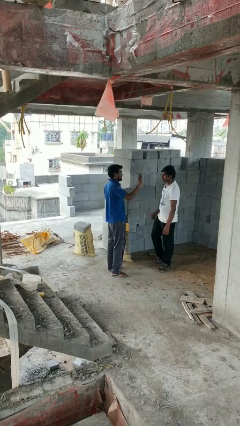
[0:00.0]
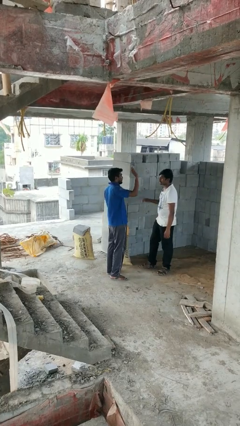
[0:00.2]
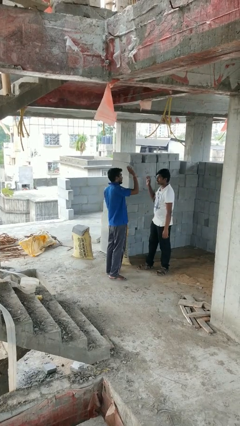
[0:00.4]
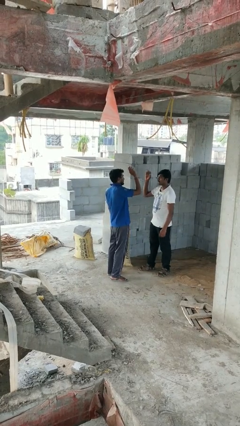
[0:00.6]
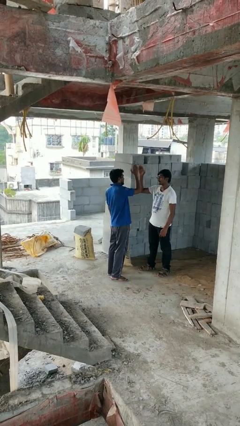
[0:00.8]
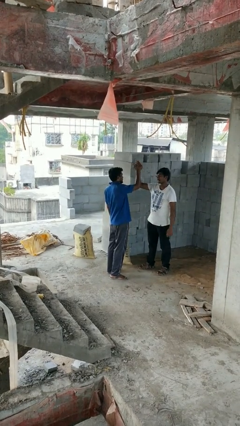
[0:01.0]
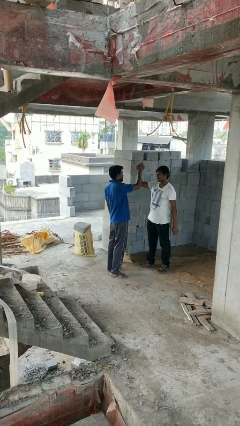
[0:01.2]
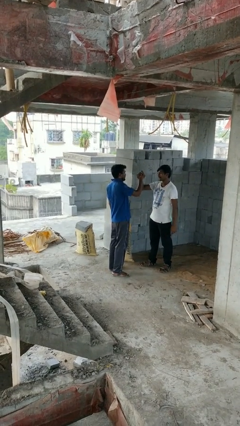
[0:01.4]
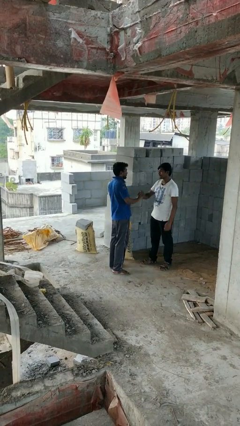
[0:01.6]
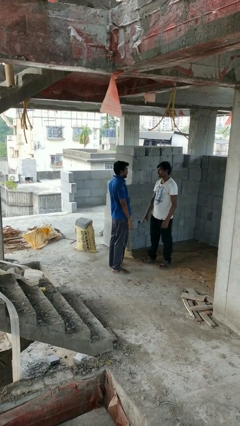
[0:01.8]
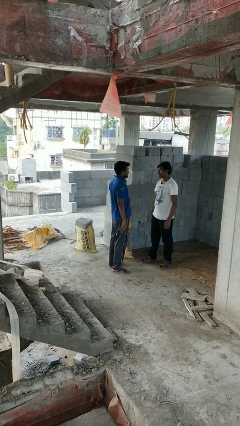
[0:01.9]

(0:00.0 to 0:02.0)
person highfives hand

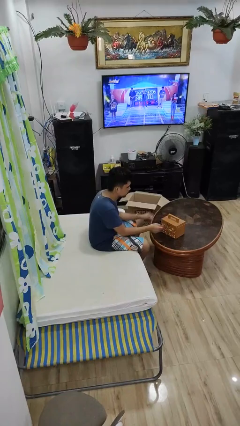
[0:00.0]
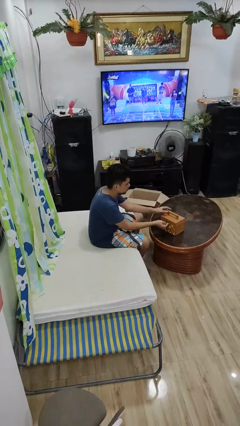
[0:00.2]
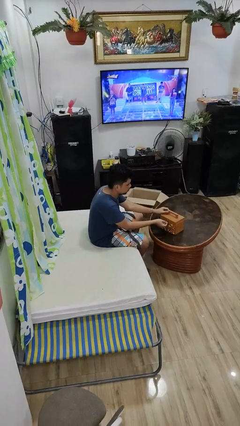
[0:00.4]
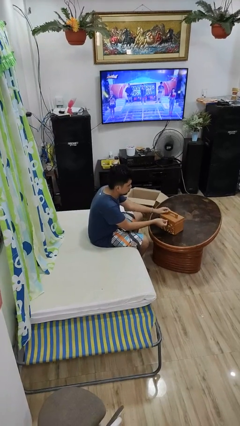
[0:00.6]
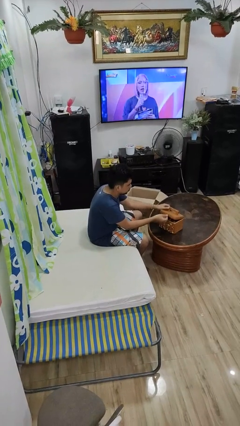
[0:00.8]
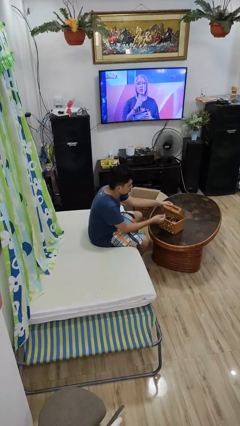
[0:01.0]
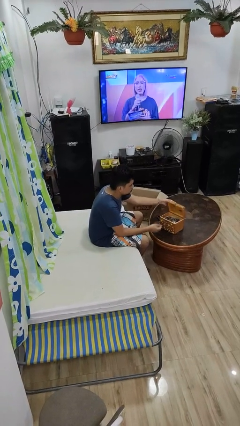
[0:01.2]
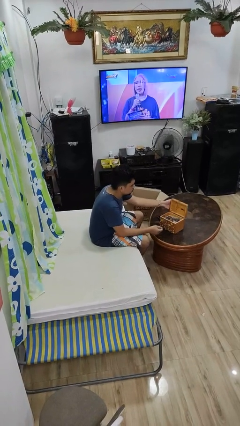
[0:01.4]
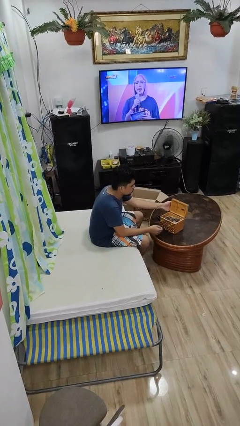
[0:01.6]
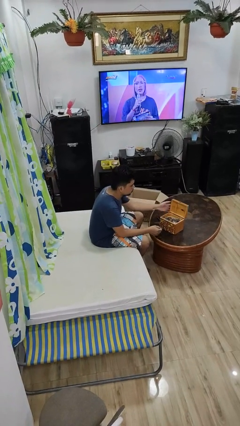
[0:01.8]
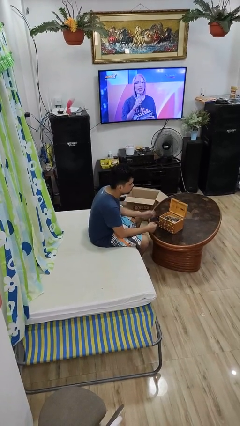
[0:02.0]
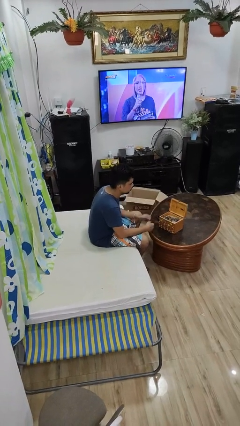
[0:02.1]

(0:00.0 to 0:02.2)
person opens jewelry box

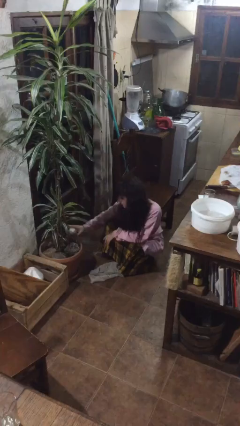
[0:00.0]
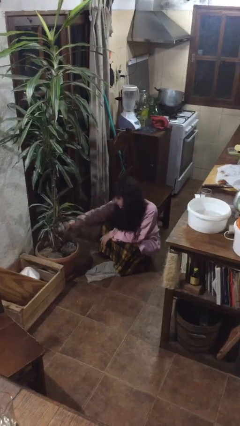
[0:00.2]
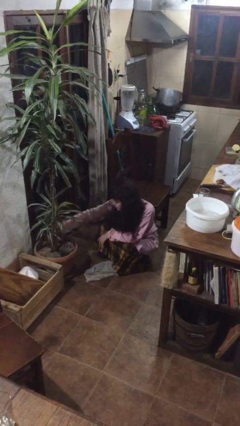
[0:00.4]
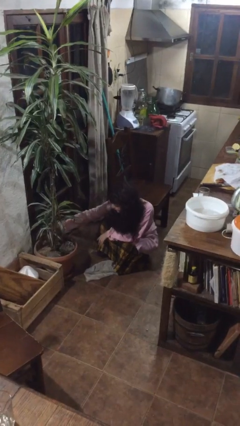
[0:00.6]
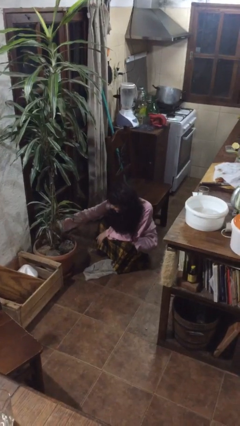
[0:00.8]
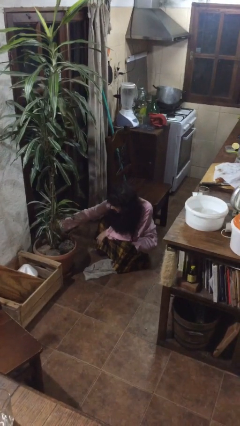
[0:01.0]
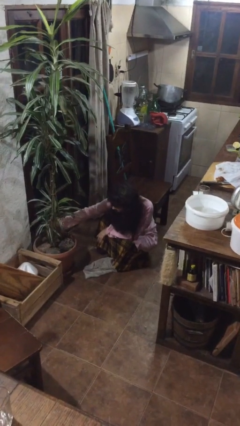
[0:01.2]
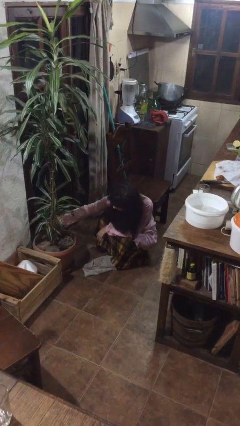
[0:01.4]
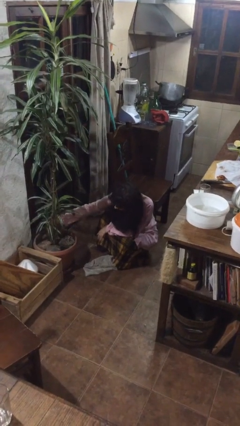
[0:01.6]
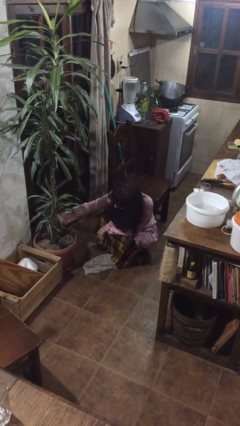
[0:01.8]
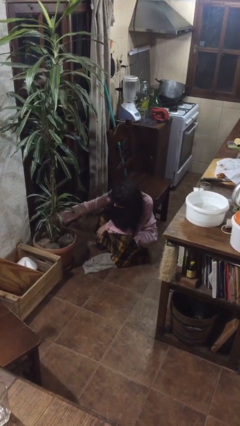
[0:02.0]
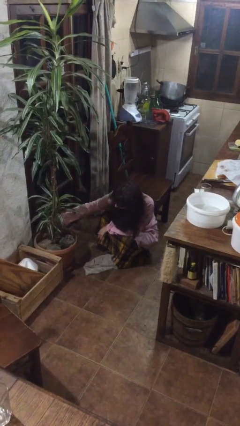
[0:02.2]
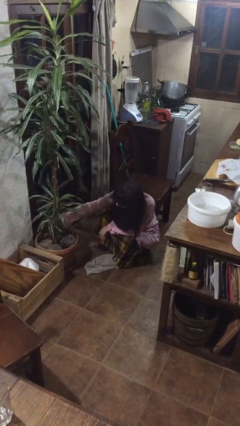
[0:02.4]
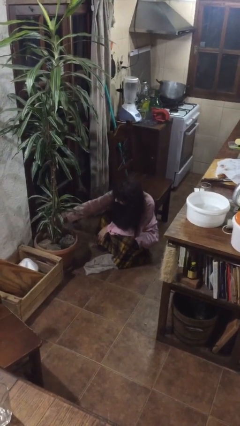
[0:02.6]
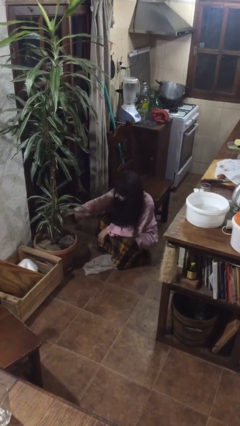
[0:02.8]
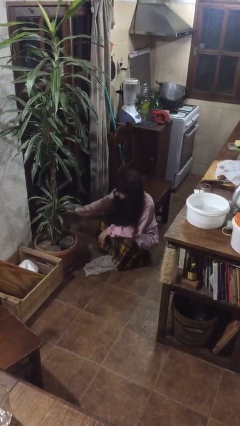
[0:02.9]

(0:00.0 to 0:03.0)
person waters houseplant

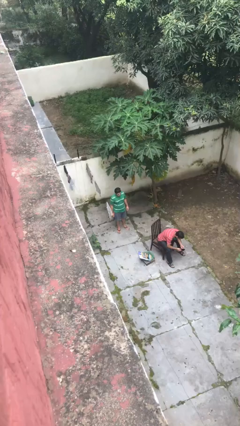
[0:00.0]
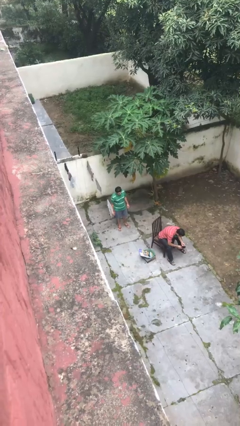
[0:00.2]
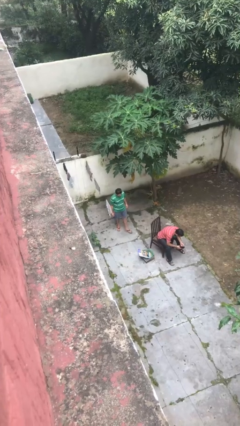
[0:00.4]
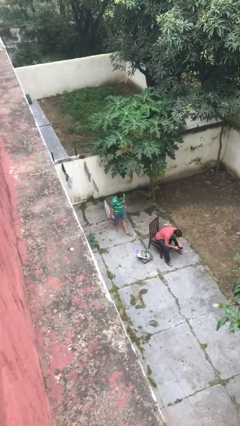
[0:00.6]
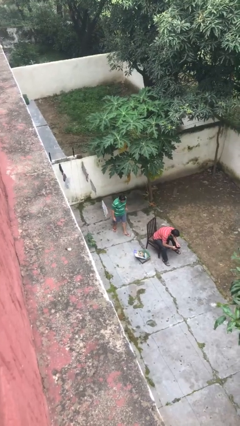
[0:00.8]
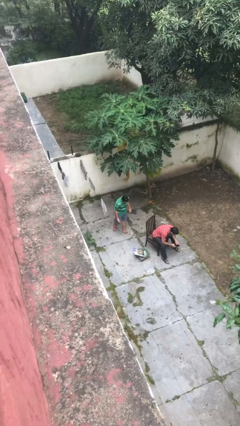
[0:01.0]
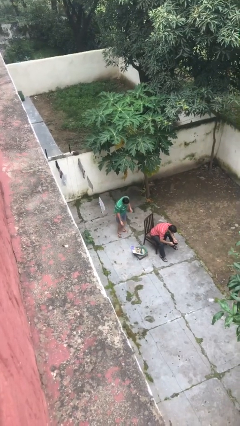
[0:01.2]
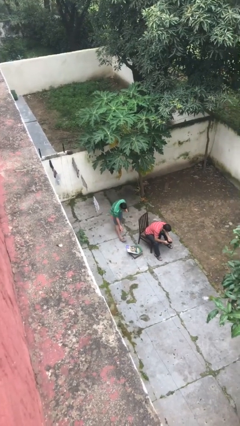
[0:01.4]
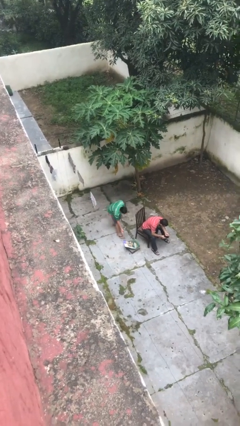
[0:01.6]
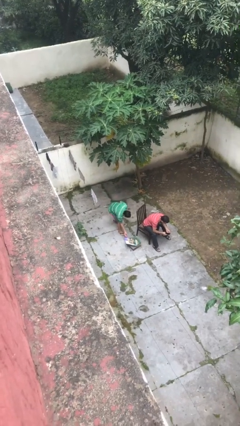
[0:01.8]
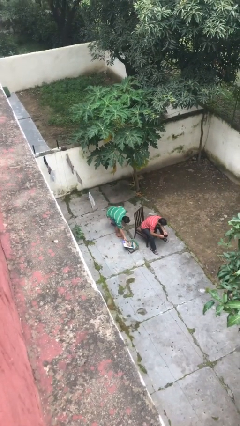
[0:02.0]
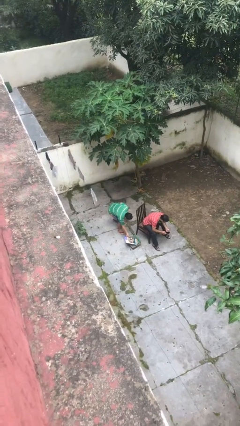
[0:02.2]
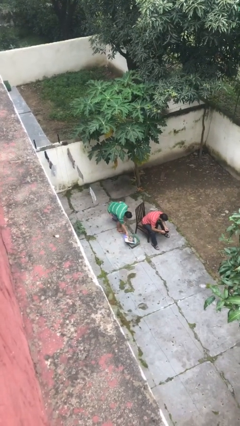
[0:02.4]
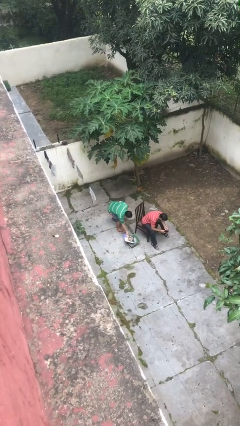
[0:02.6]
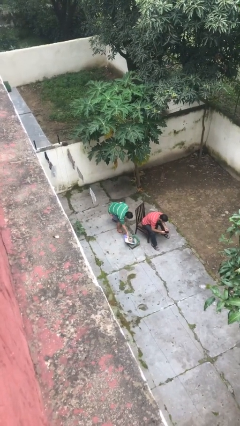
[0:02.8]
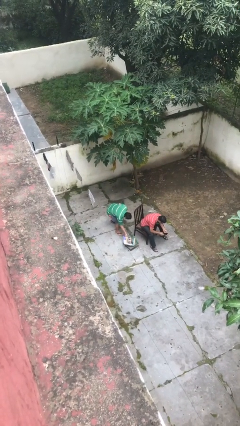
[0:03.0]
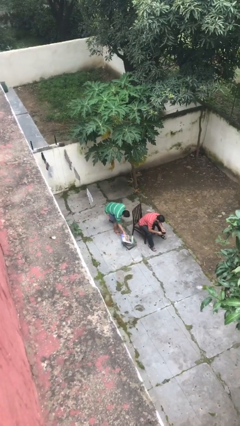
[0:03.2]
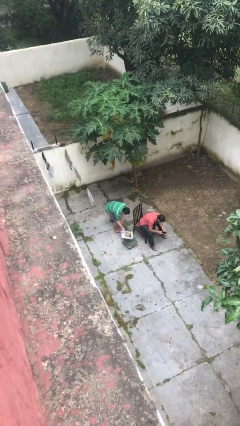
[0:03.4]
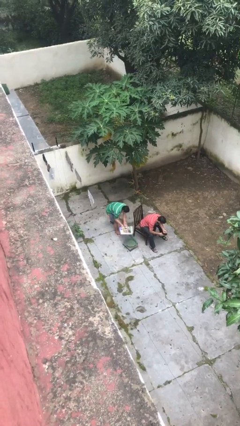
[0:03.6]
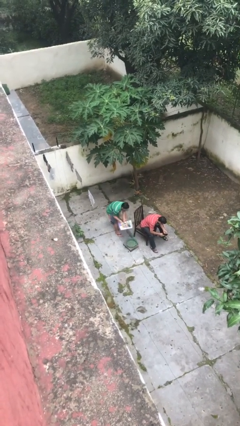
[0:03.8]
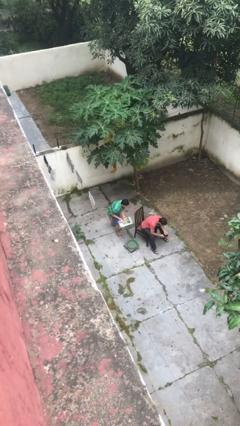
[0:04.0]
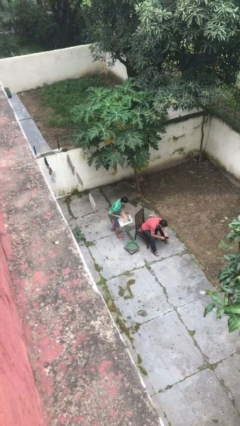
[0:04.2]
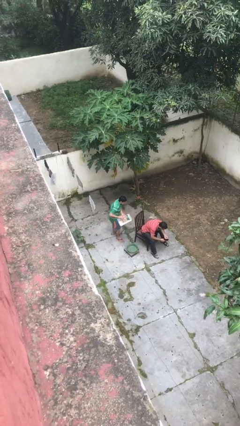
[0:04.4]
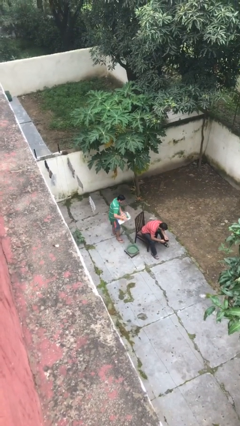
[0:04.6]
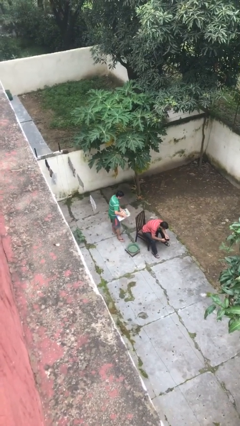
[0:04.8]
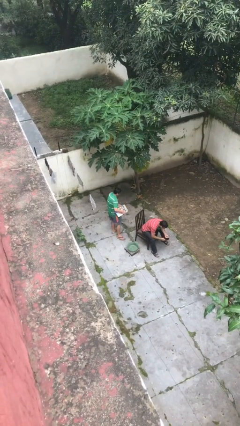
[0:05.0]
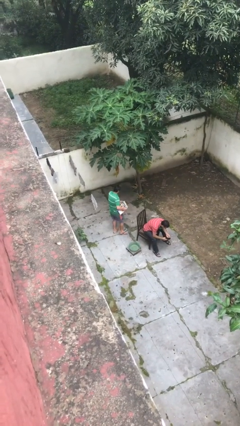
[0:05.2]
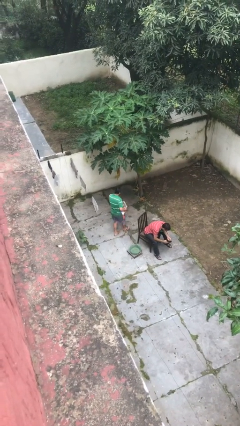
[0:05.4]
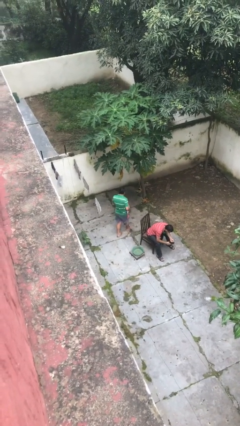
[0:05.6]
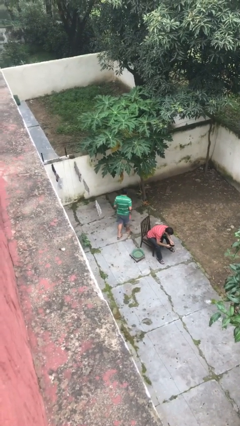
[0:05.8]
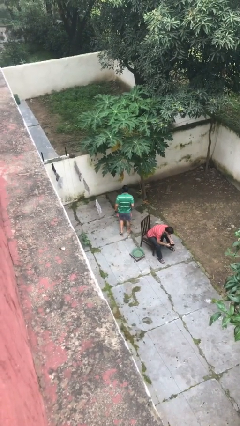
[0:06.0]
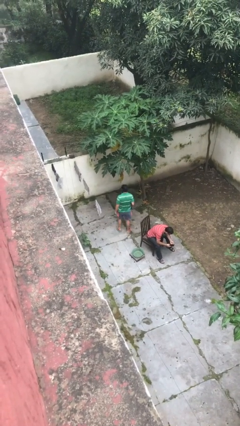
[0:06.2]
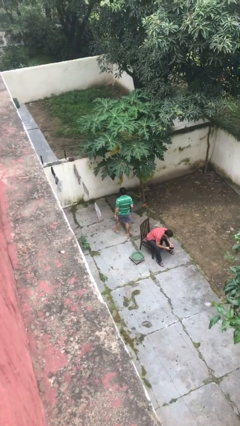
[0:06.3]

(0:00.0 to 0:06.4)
person steals object from person

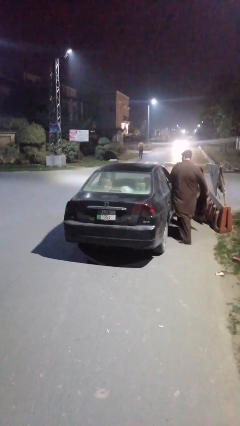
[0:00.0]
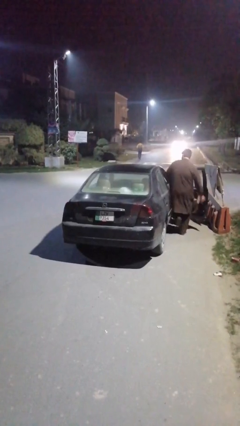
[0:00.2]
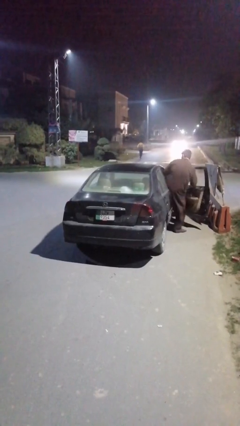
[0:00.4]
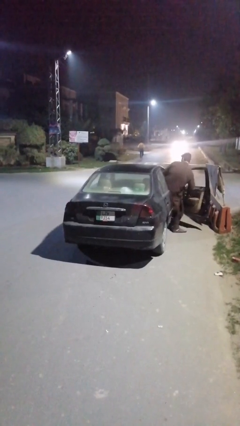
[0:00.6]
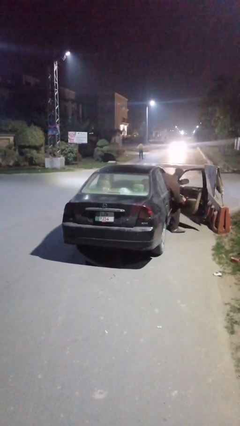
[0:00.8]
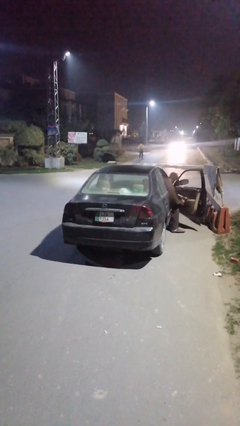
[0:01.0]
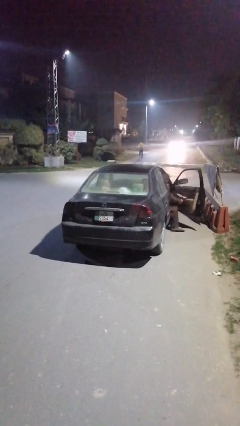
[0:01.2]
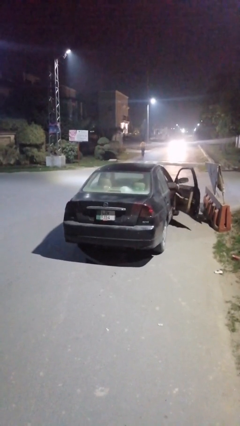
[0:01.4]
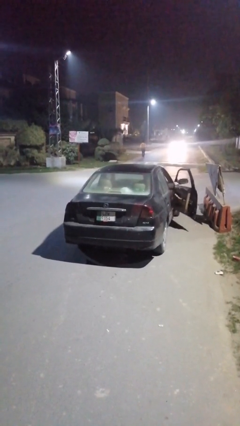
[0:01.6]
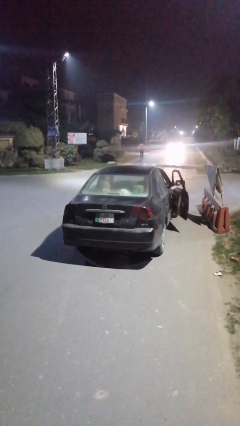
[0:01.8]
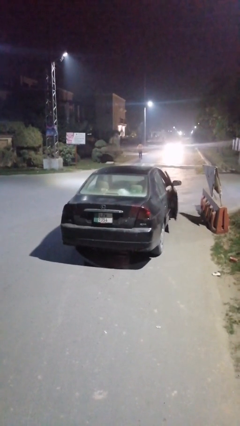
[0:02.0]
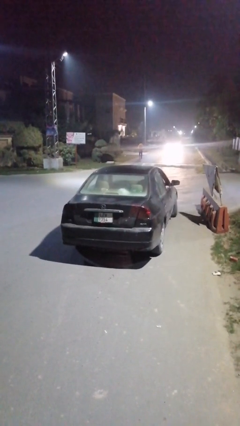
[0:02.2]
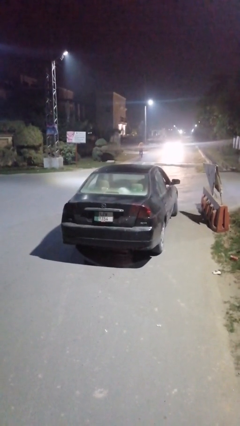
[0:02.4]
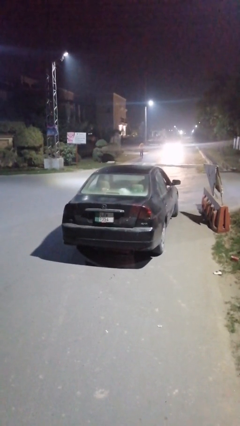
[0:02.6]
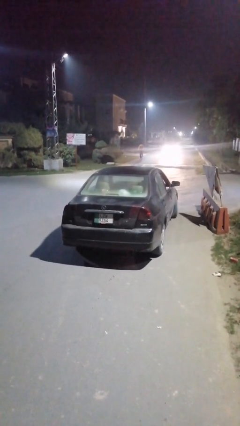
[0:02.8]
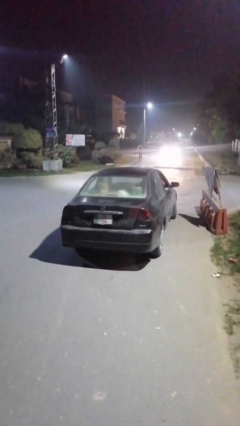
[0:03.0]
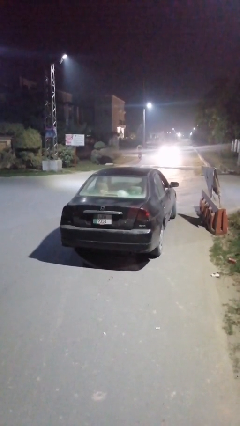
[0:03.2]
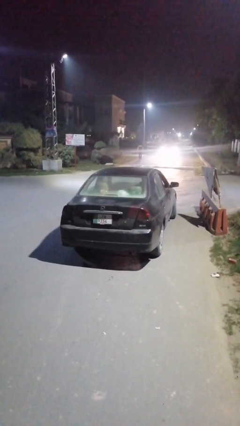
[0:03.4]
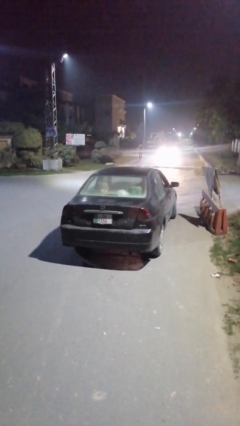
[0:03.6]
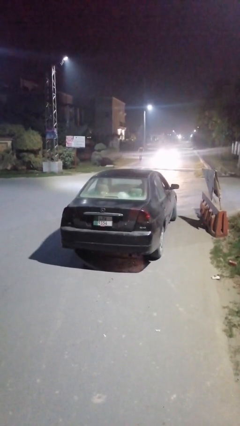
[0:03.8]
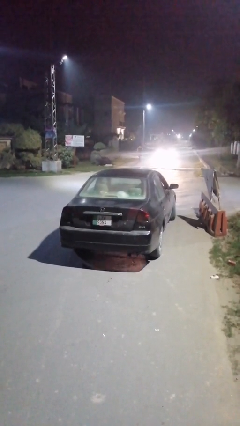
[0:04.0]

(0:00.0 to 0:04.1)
car picks up person
